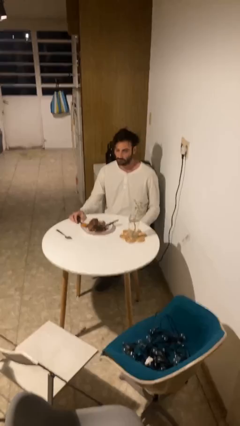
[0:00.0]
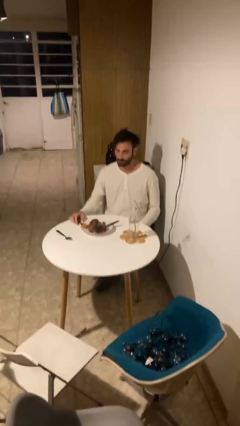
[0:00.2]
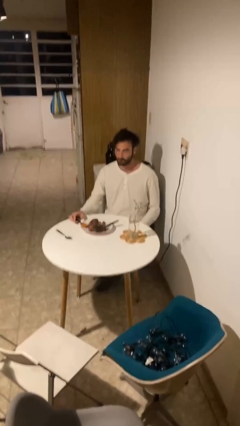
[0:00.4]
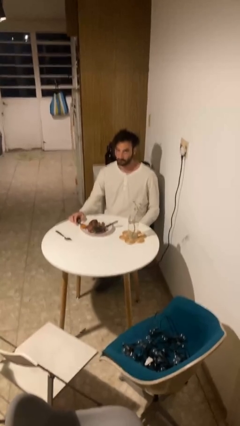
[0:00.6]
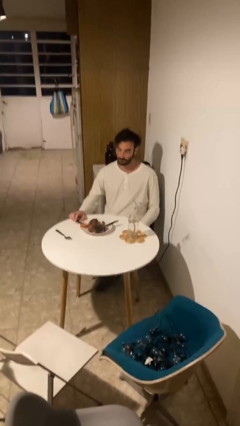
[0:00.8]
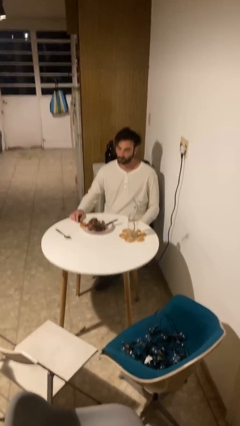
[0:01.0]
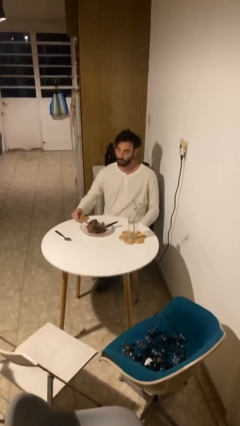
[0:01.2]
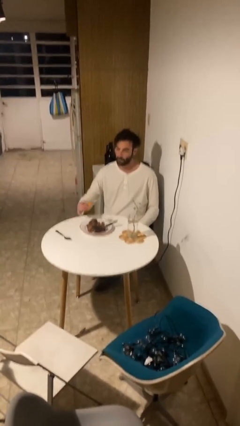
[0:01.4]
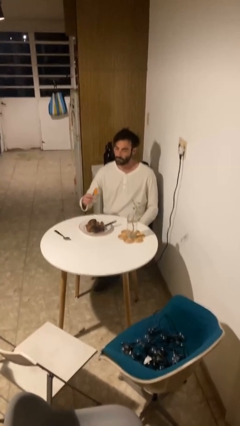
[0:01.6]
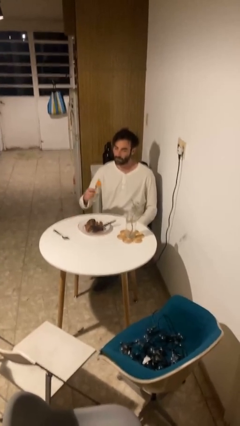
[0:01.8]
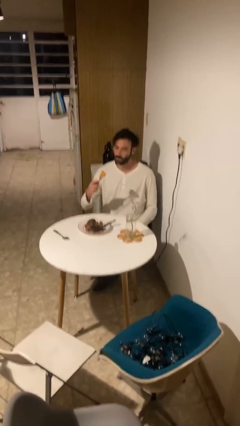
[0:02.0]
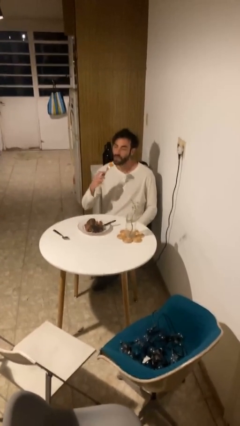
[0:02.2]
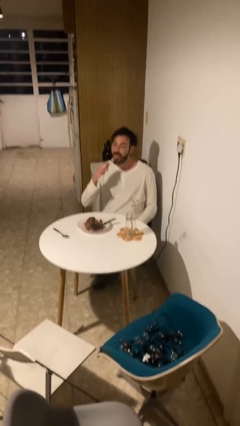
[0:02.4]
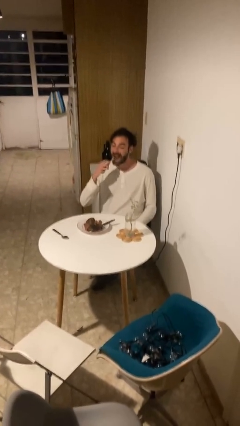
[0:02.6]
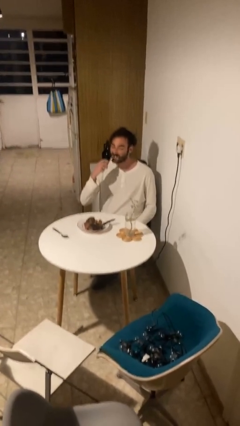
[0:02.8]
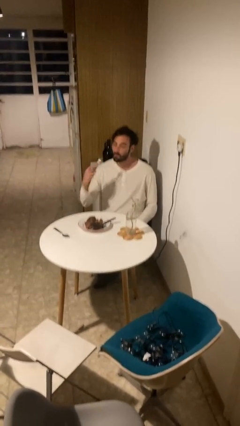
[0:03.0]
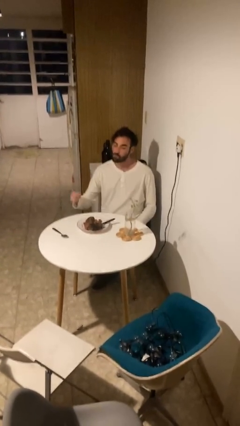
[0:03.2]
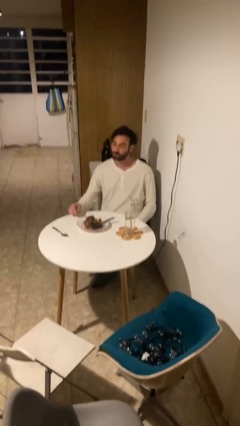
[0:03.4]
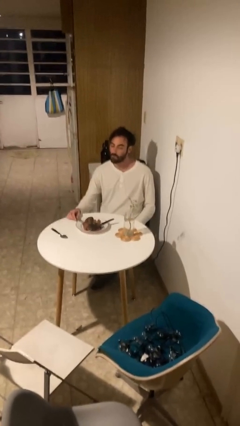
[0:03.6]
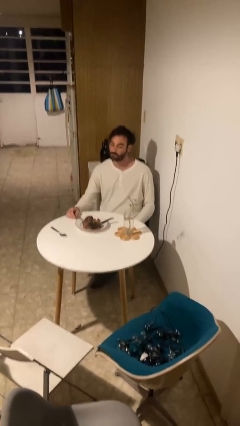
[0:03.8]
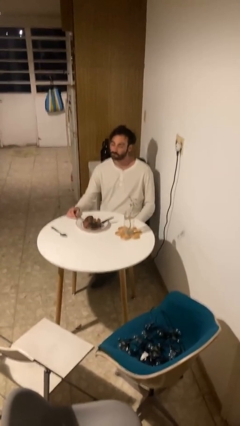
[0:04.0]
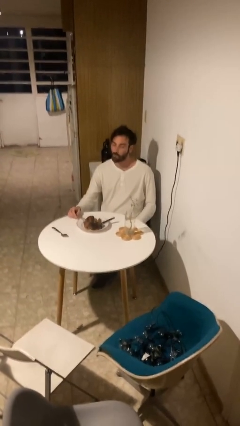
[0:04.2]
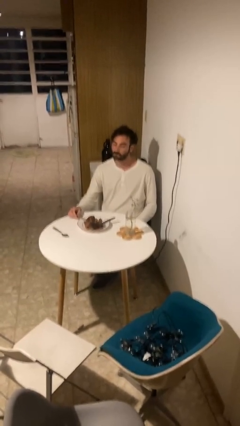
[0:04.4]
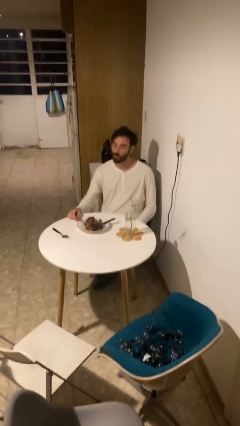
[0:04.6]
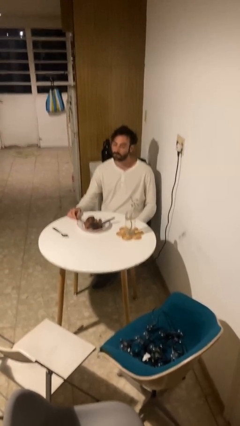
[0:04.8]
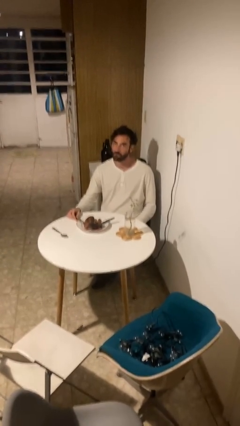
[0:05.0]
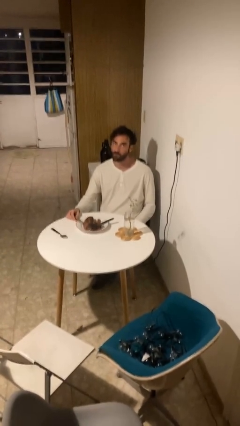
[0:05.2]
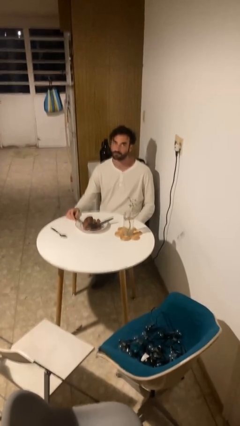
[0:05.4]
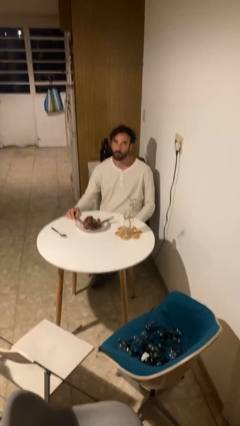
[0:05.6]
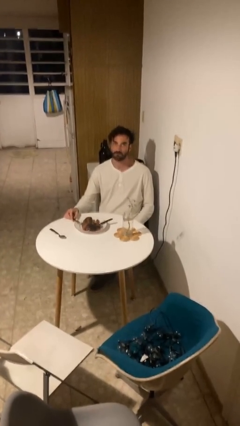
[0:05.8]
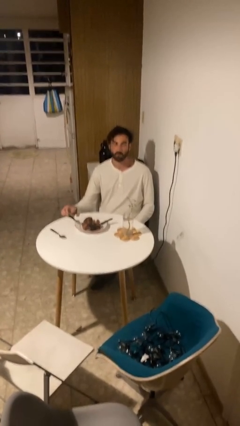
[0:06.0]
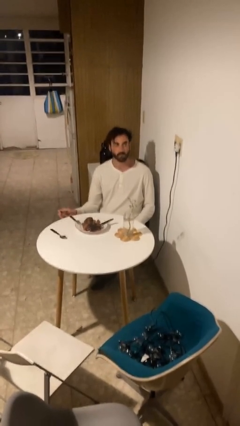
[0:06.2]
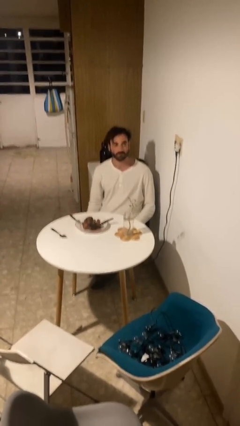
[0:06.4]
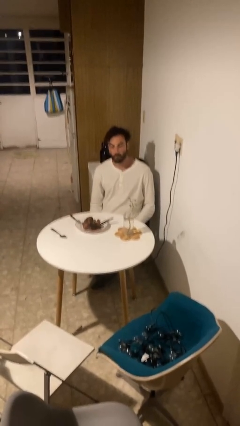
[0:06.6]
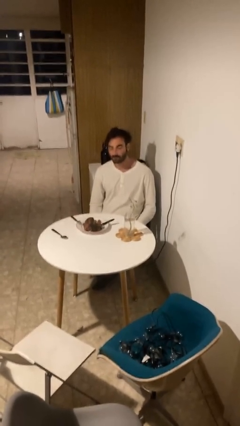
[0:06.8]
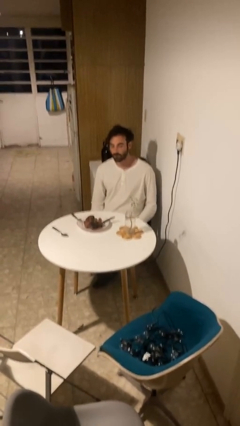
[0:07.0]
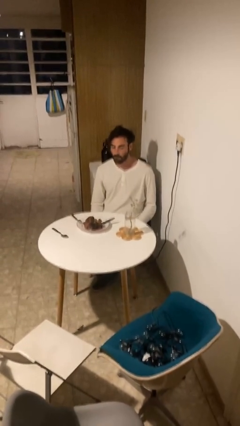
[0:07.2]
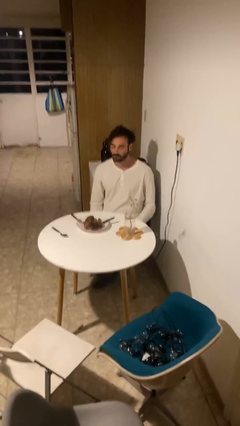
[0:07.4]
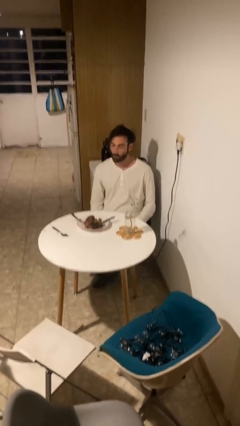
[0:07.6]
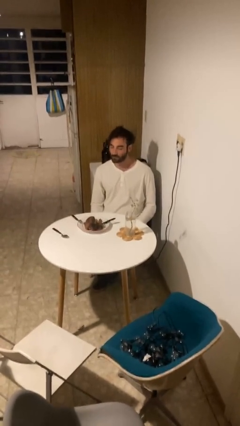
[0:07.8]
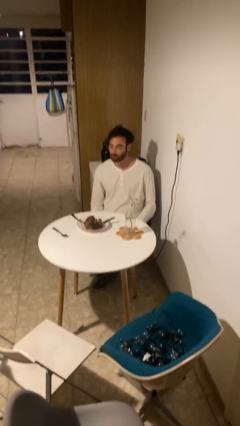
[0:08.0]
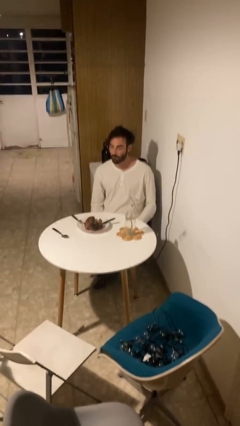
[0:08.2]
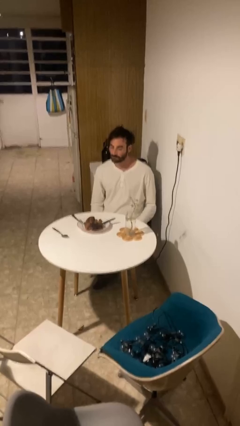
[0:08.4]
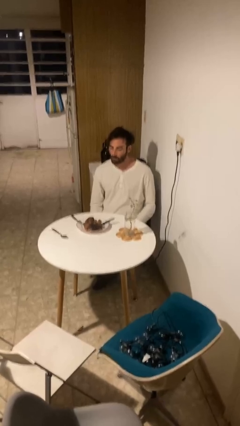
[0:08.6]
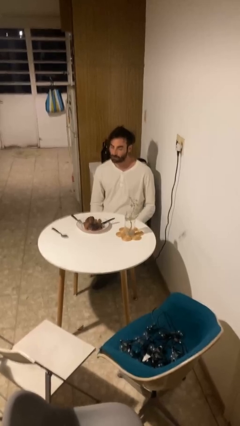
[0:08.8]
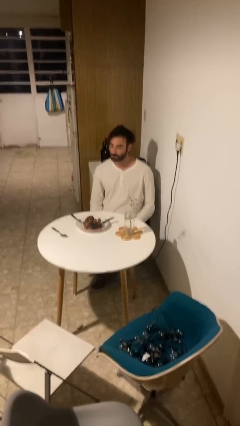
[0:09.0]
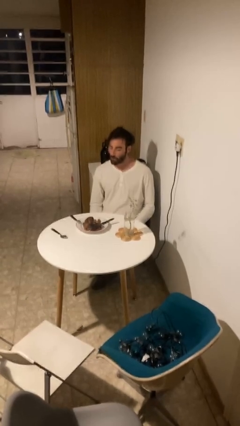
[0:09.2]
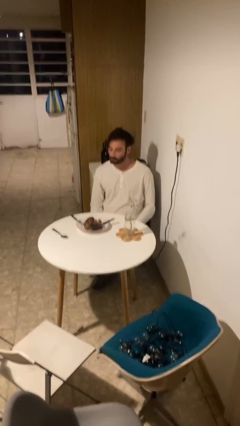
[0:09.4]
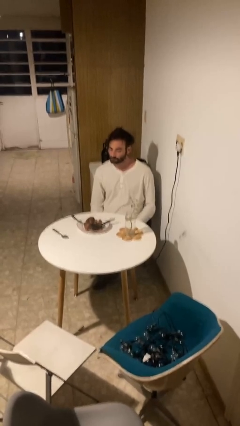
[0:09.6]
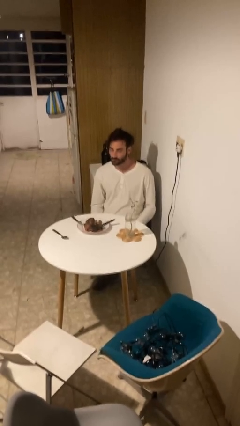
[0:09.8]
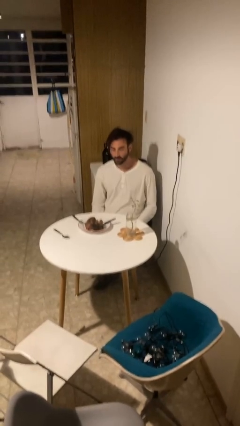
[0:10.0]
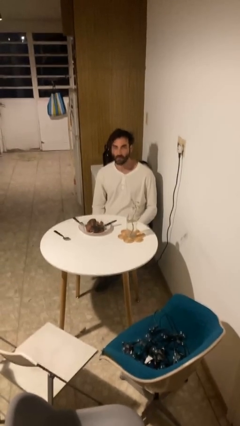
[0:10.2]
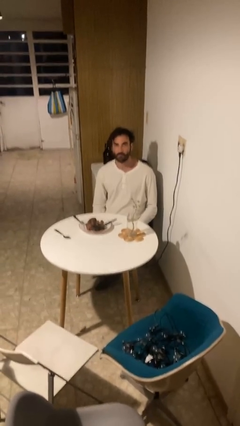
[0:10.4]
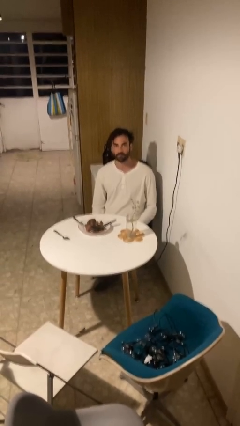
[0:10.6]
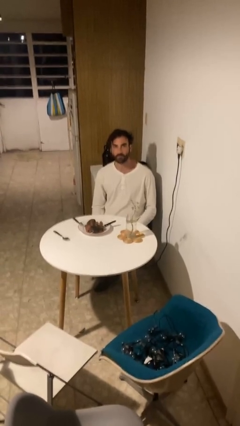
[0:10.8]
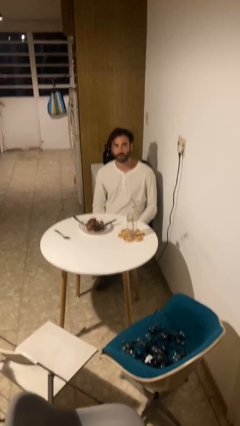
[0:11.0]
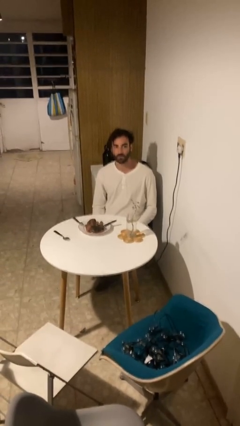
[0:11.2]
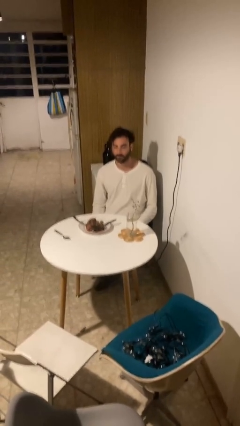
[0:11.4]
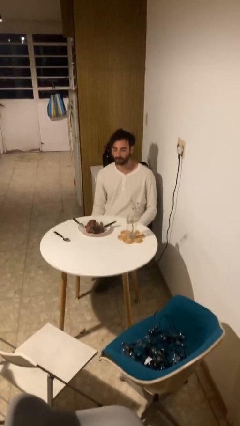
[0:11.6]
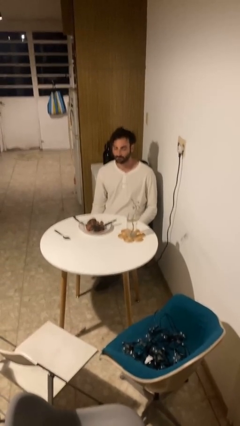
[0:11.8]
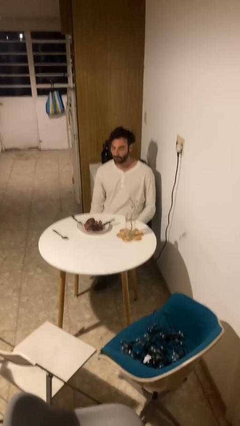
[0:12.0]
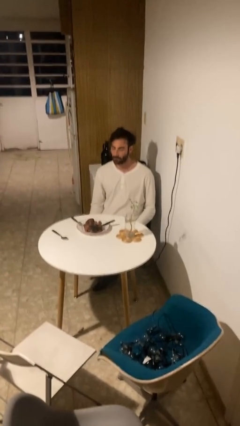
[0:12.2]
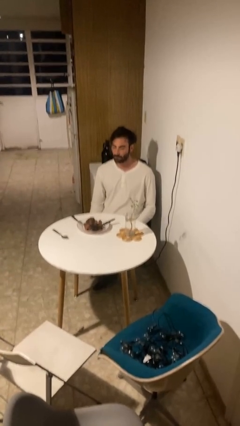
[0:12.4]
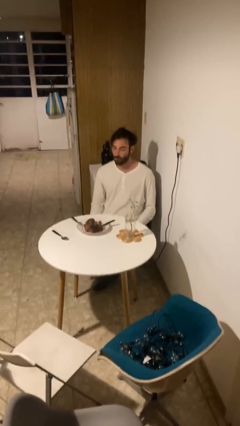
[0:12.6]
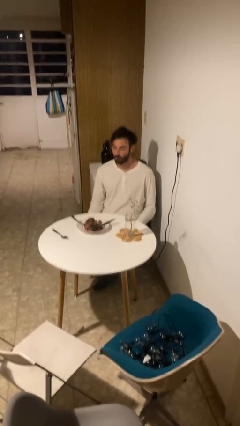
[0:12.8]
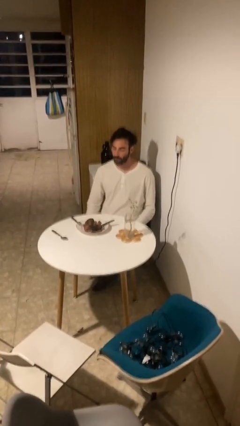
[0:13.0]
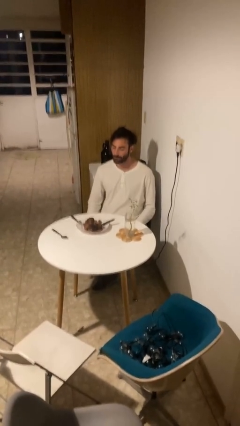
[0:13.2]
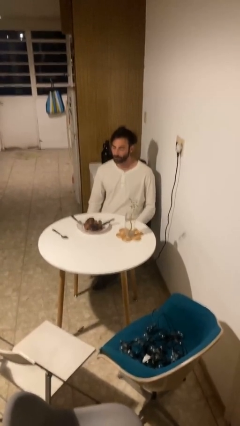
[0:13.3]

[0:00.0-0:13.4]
person eats with utensil

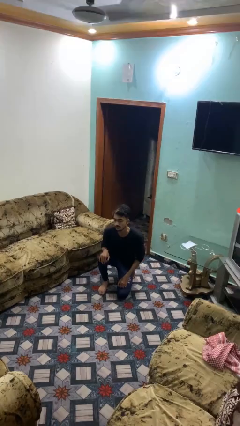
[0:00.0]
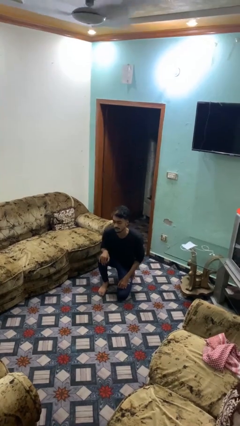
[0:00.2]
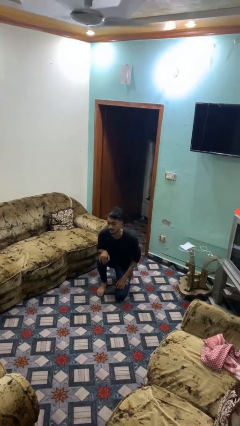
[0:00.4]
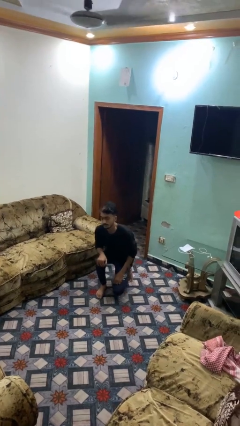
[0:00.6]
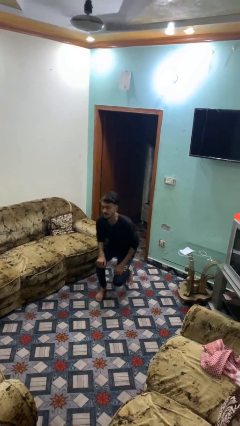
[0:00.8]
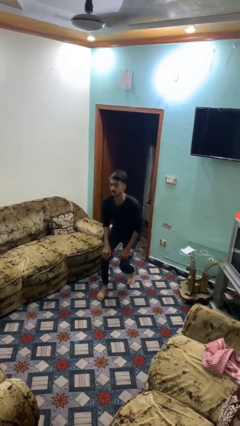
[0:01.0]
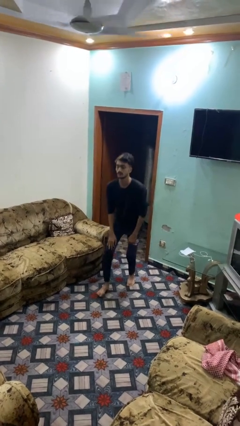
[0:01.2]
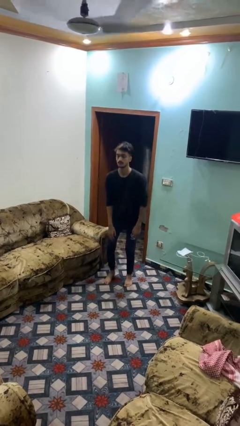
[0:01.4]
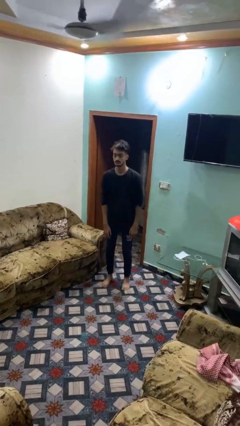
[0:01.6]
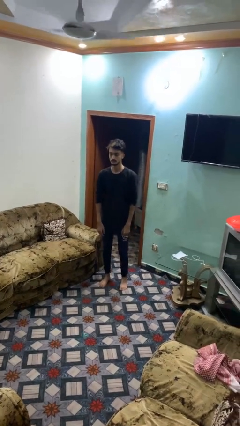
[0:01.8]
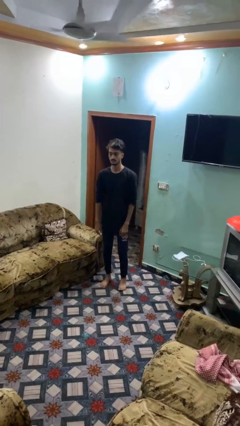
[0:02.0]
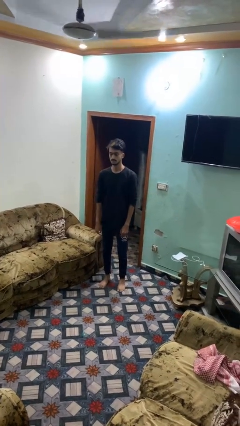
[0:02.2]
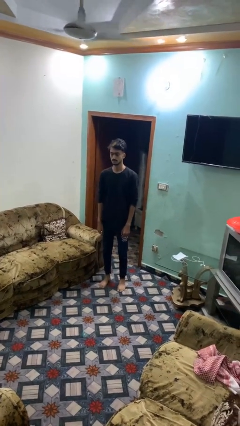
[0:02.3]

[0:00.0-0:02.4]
person stands up from floor

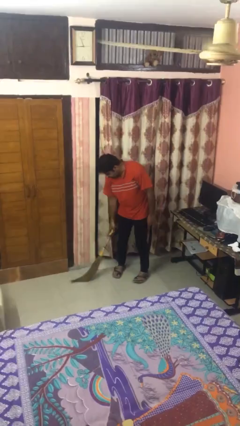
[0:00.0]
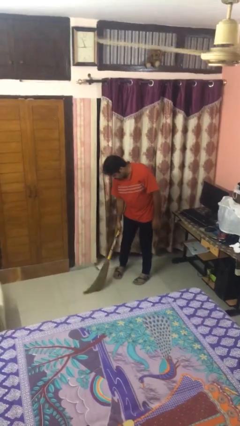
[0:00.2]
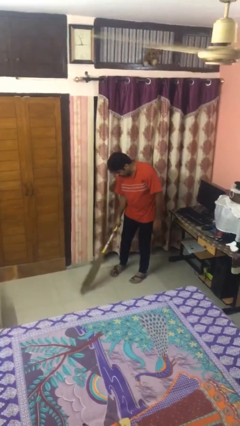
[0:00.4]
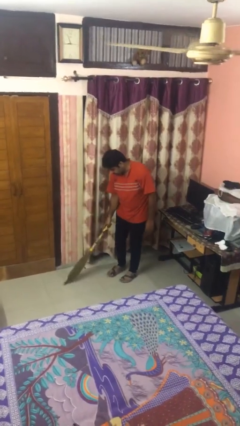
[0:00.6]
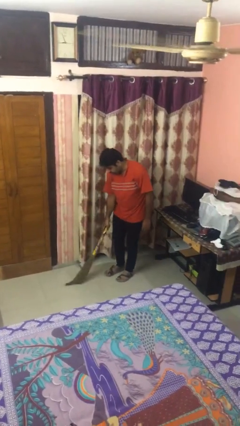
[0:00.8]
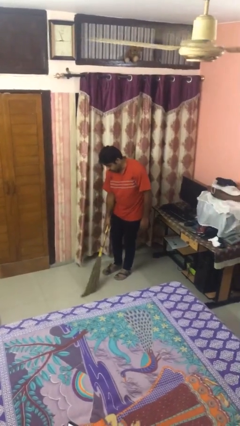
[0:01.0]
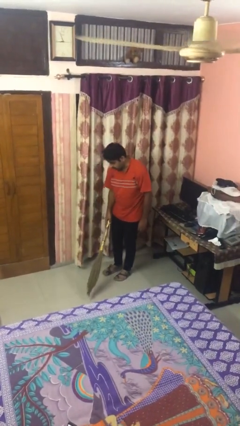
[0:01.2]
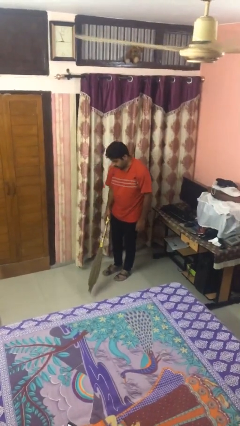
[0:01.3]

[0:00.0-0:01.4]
person sweeps floor

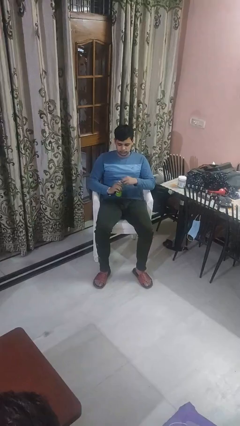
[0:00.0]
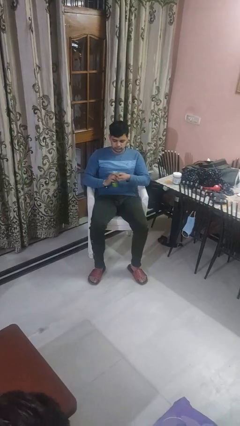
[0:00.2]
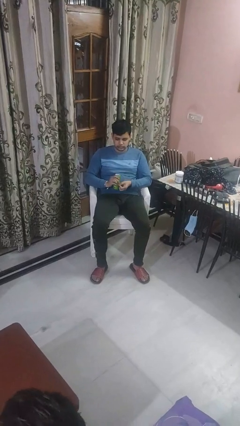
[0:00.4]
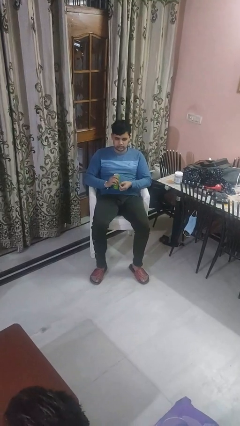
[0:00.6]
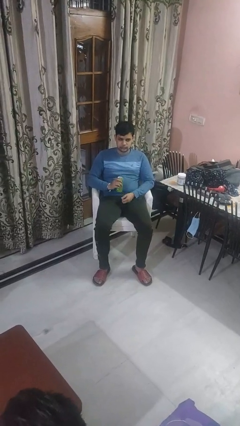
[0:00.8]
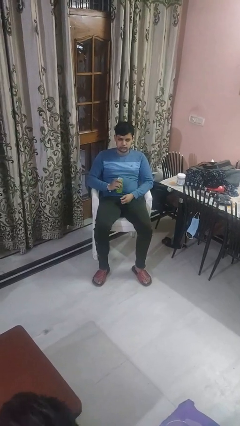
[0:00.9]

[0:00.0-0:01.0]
person opens beverage can
